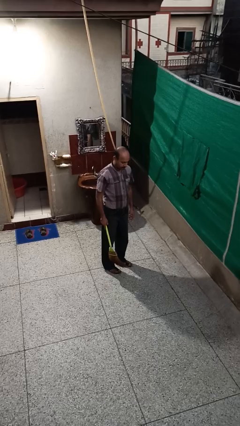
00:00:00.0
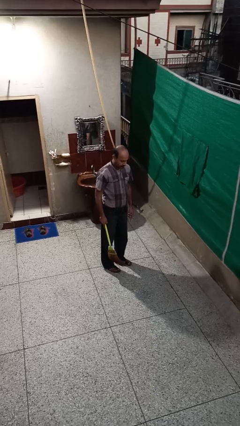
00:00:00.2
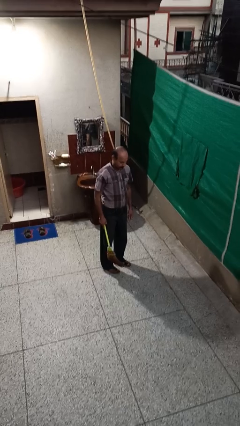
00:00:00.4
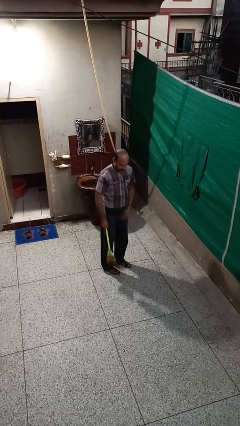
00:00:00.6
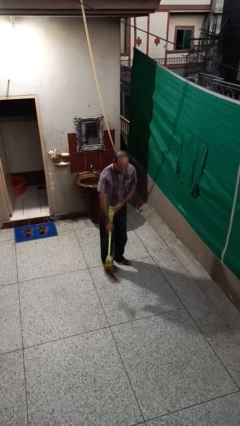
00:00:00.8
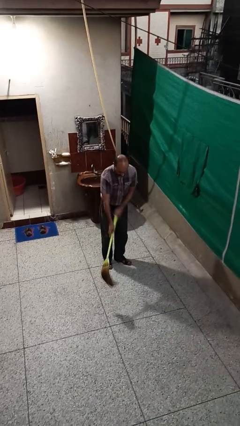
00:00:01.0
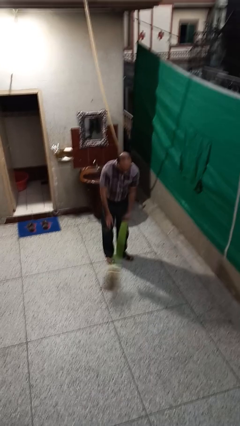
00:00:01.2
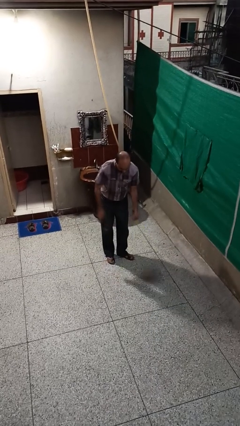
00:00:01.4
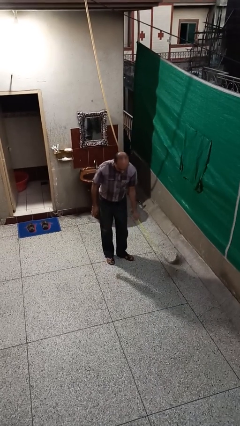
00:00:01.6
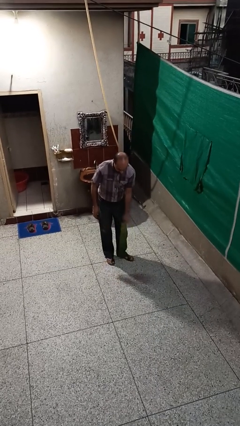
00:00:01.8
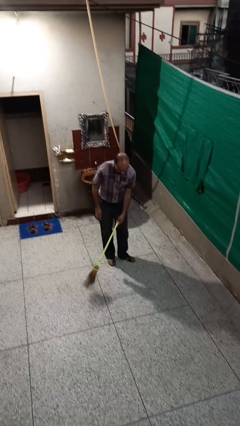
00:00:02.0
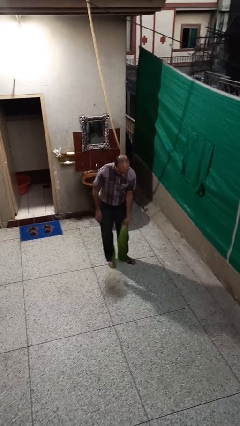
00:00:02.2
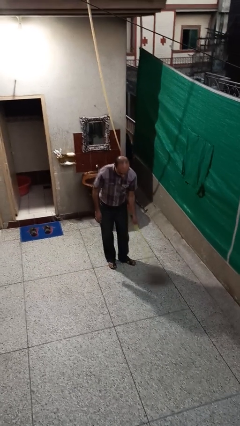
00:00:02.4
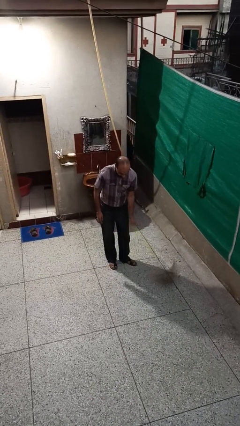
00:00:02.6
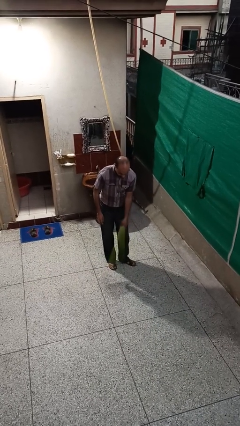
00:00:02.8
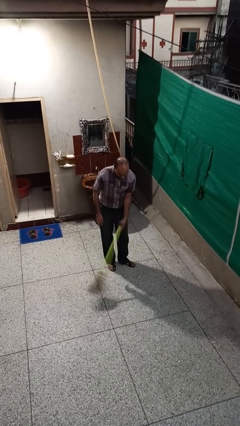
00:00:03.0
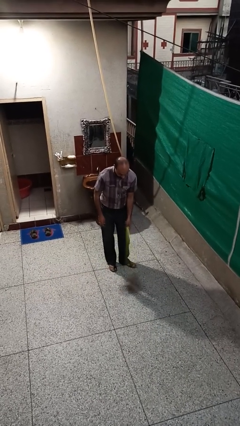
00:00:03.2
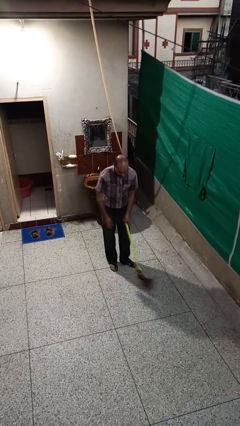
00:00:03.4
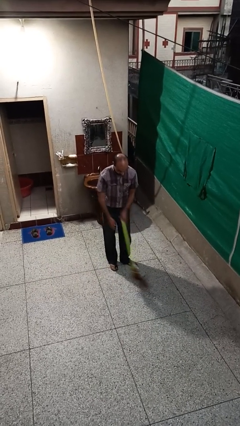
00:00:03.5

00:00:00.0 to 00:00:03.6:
person sweeps floor

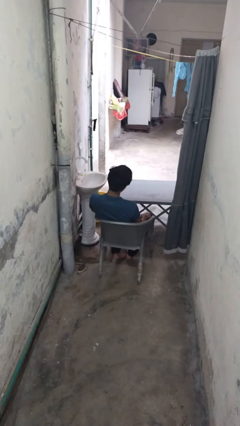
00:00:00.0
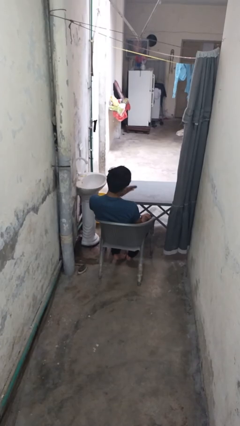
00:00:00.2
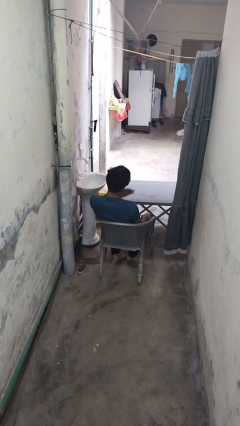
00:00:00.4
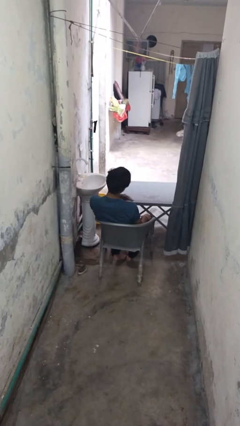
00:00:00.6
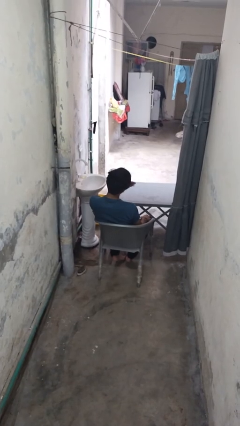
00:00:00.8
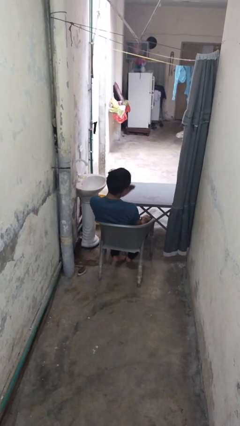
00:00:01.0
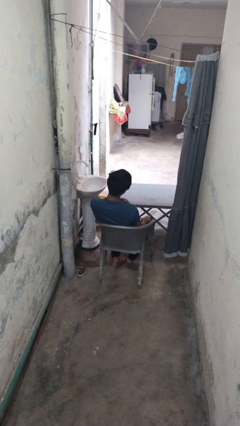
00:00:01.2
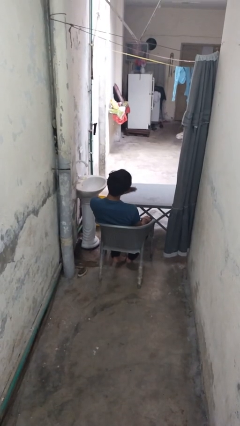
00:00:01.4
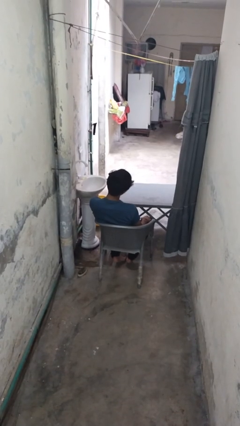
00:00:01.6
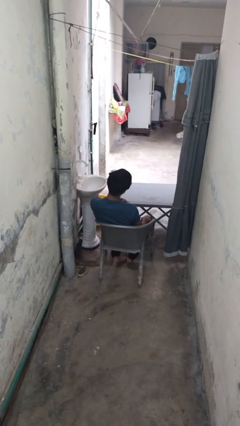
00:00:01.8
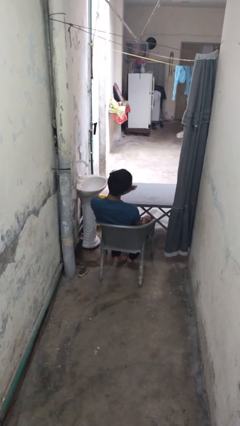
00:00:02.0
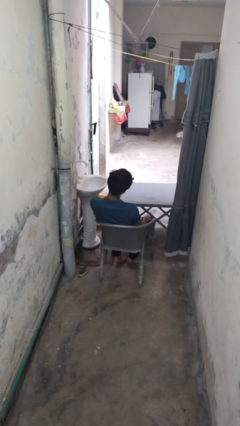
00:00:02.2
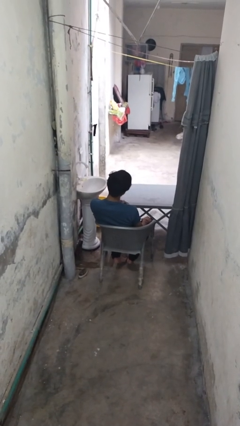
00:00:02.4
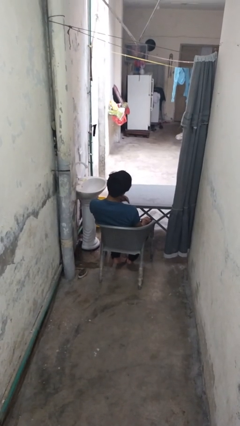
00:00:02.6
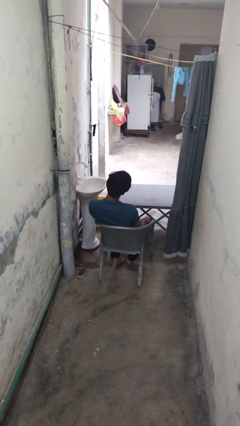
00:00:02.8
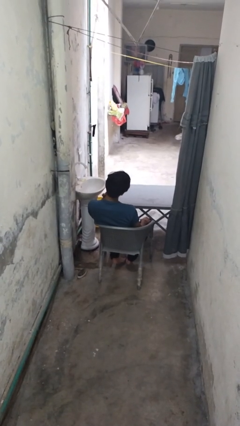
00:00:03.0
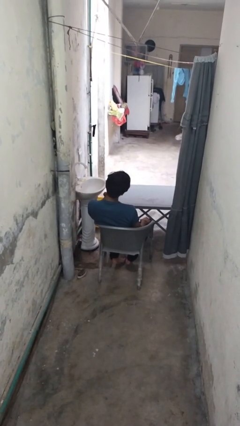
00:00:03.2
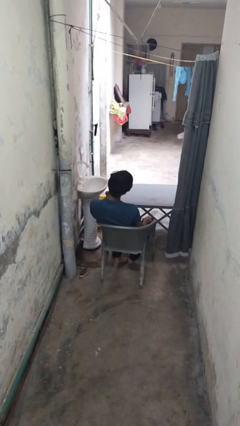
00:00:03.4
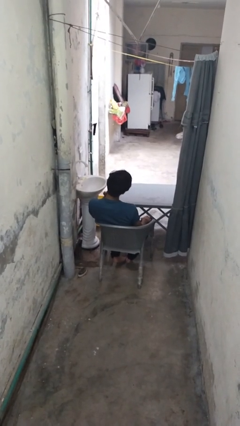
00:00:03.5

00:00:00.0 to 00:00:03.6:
person drums on chest

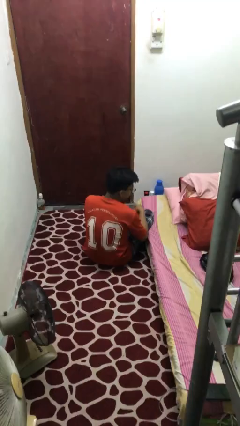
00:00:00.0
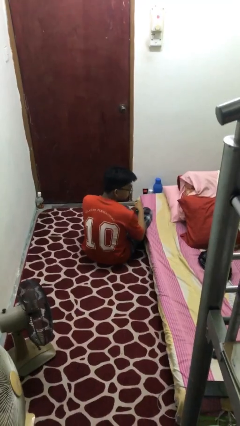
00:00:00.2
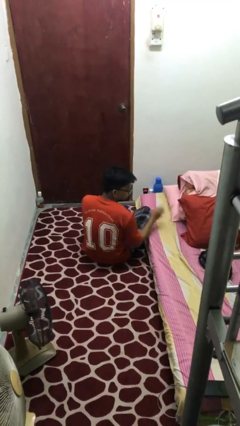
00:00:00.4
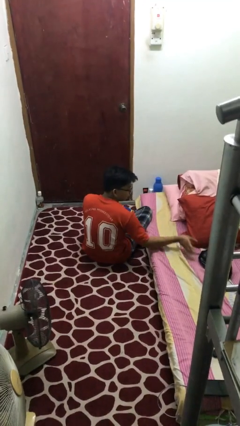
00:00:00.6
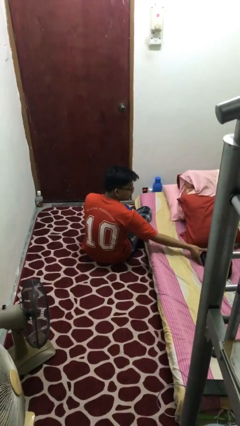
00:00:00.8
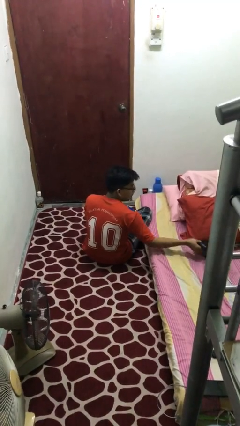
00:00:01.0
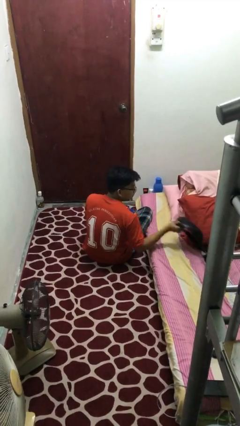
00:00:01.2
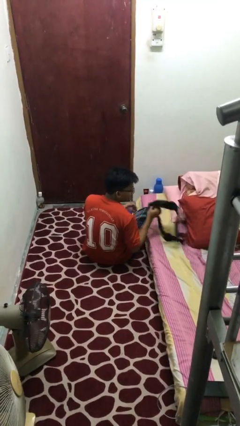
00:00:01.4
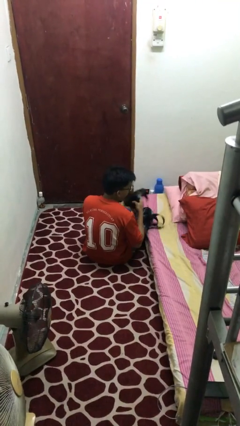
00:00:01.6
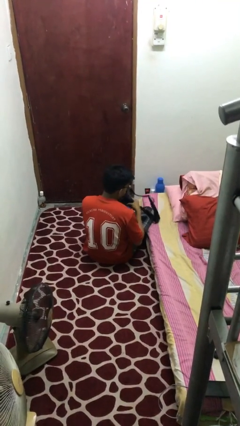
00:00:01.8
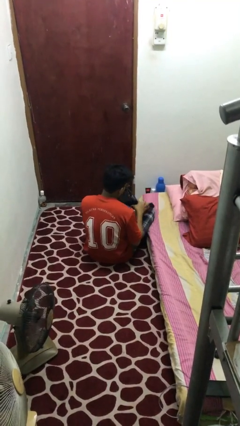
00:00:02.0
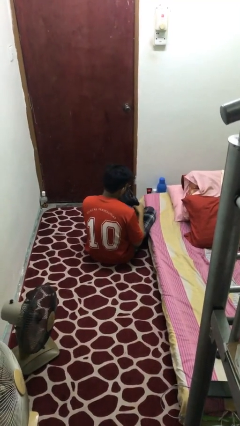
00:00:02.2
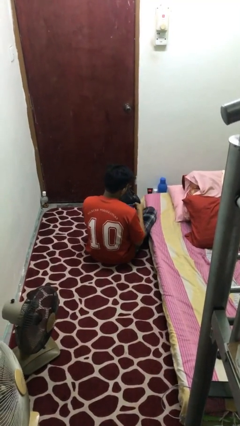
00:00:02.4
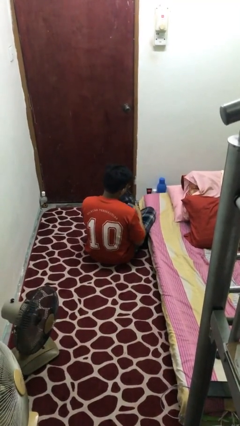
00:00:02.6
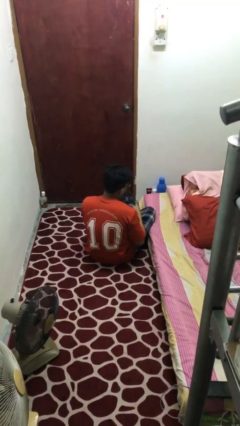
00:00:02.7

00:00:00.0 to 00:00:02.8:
person picks up object from bed

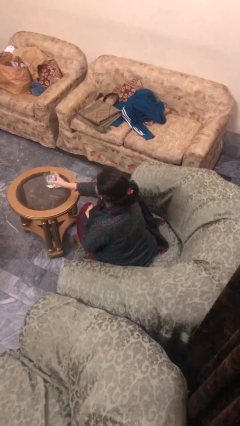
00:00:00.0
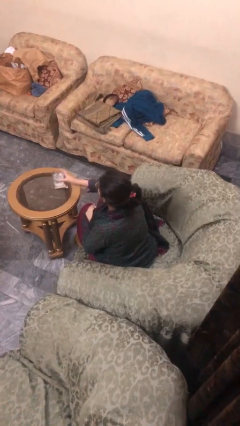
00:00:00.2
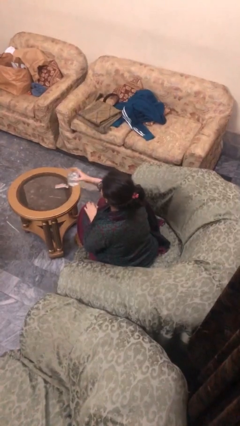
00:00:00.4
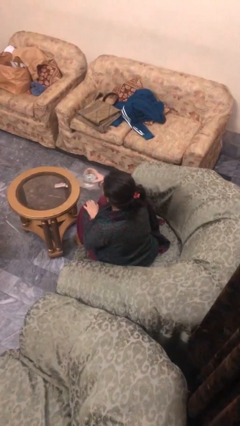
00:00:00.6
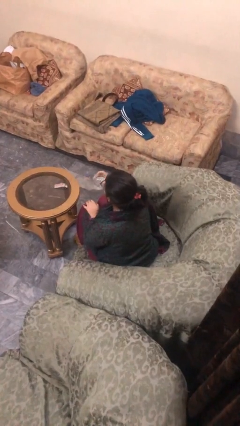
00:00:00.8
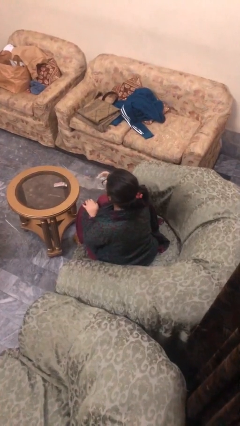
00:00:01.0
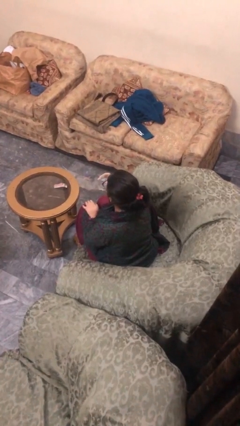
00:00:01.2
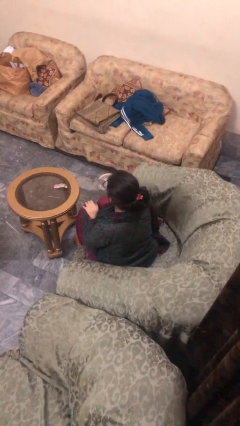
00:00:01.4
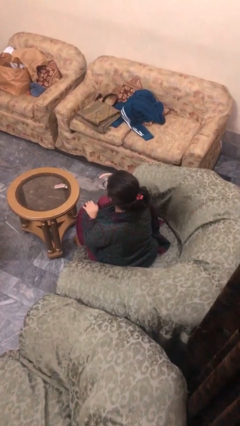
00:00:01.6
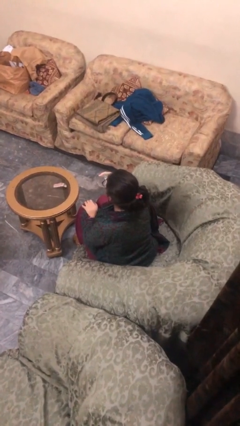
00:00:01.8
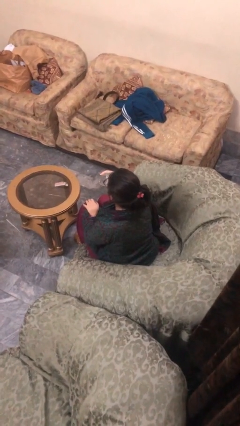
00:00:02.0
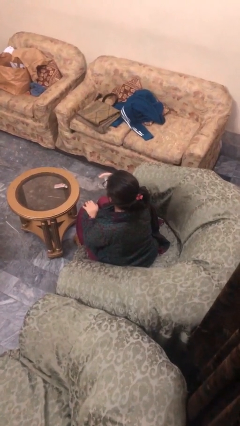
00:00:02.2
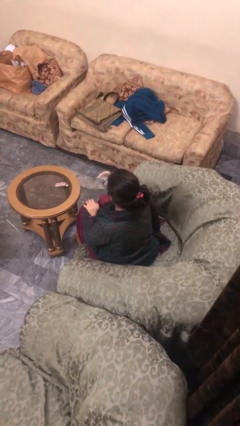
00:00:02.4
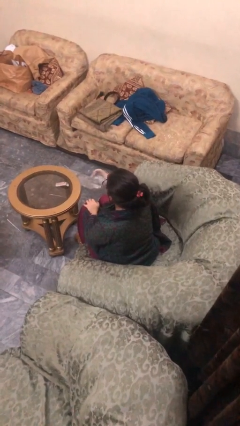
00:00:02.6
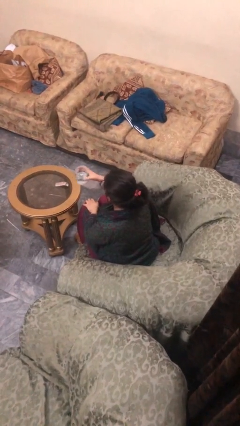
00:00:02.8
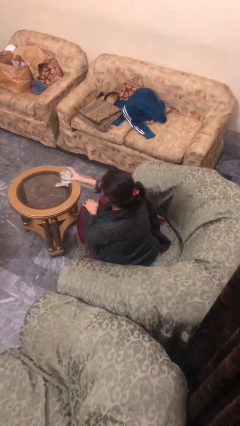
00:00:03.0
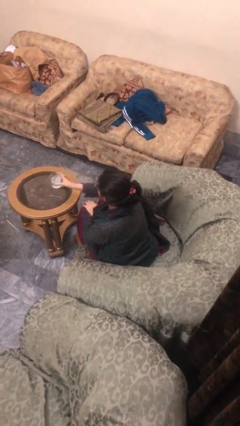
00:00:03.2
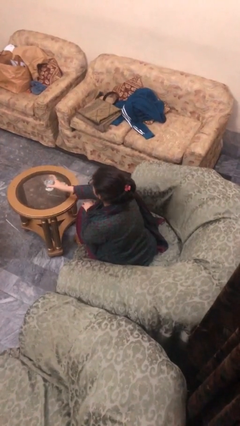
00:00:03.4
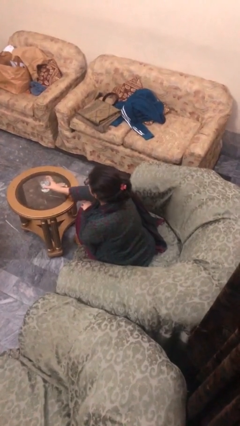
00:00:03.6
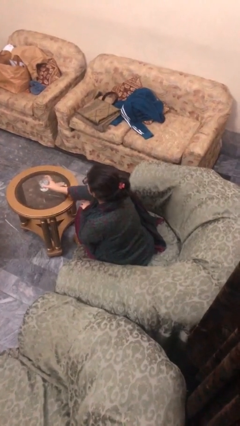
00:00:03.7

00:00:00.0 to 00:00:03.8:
person drinks from cup

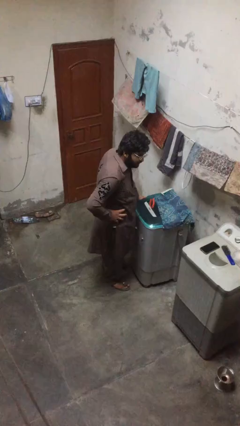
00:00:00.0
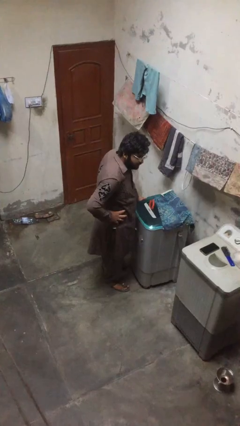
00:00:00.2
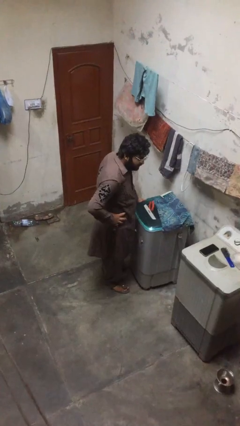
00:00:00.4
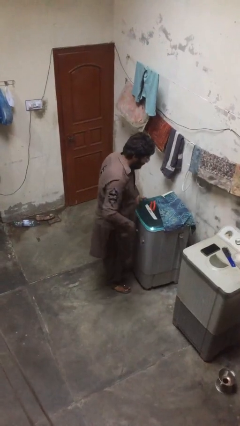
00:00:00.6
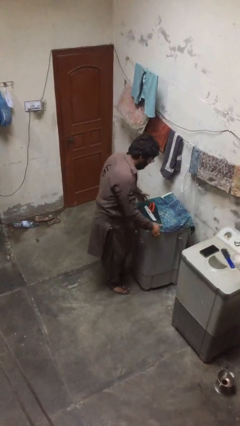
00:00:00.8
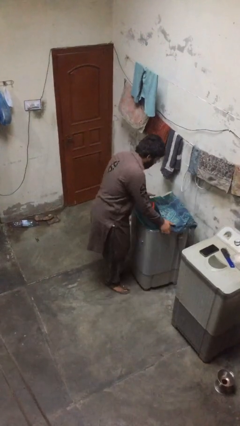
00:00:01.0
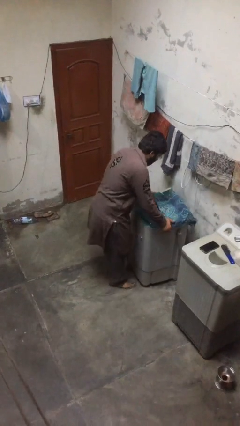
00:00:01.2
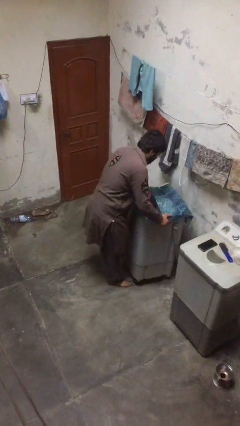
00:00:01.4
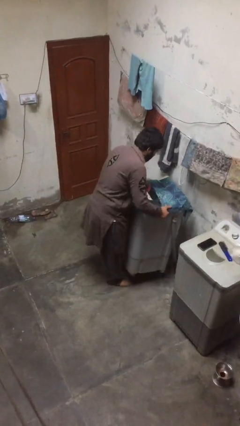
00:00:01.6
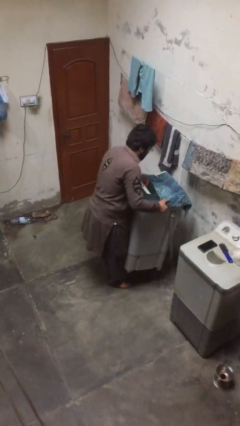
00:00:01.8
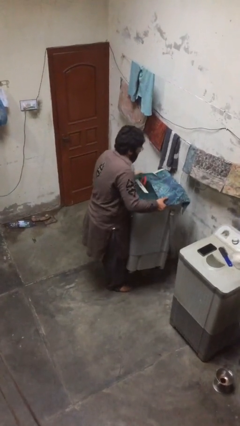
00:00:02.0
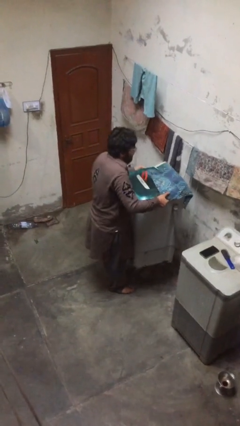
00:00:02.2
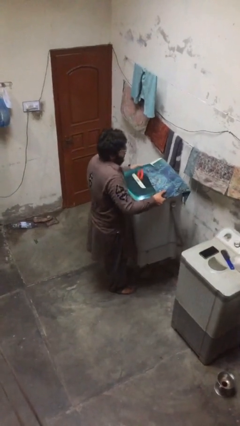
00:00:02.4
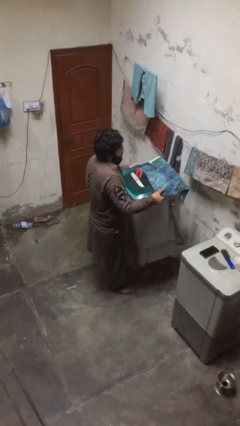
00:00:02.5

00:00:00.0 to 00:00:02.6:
person picks up object from floor

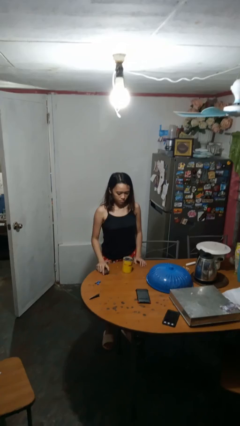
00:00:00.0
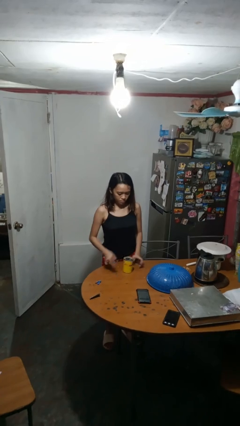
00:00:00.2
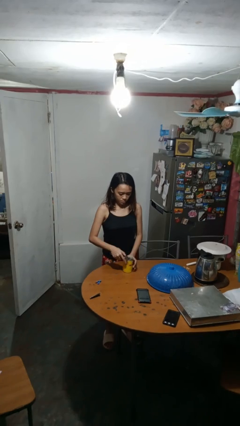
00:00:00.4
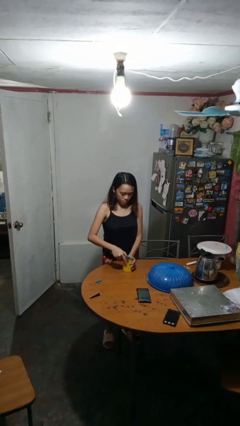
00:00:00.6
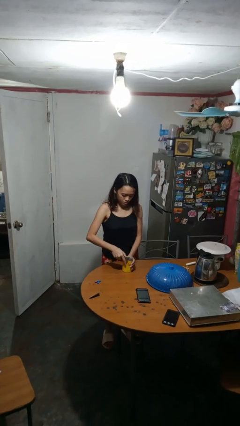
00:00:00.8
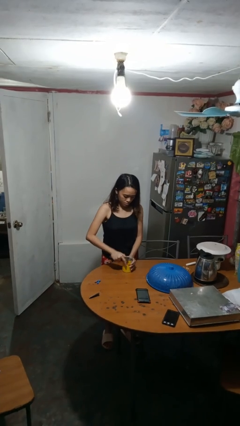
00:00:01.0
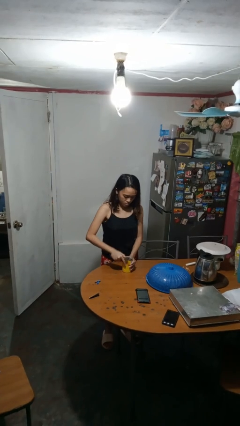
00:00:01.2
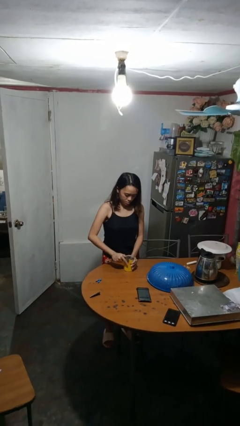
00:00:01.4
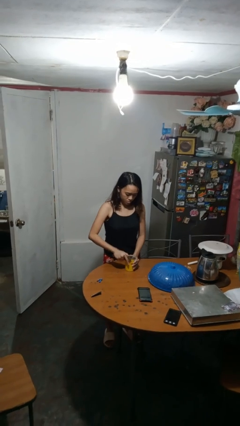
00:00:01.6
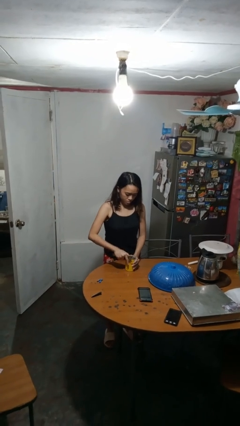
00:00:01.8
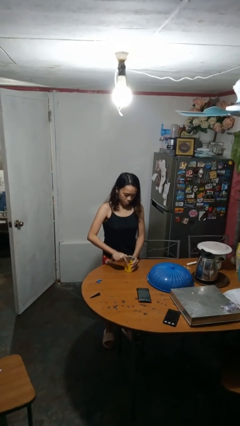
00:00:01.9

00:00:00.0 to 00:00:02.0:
person opens can with can opener
